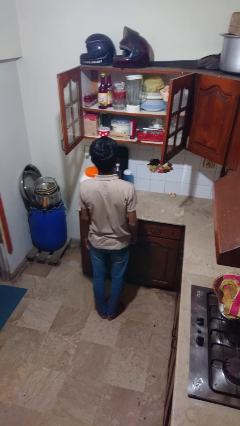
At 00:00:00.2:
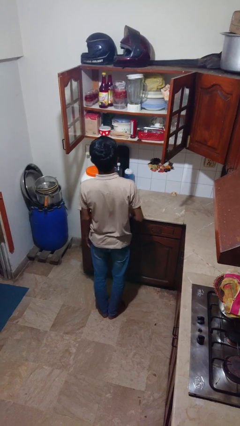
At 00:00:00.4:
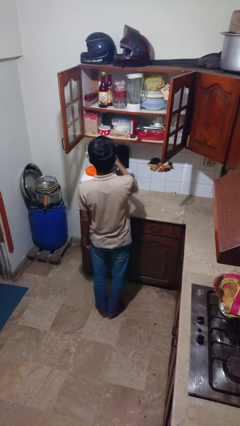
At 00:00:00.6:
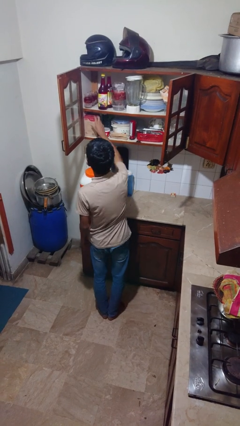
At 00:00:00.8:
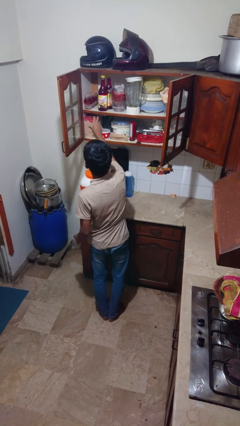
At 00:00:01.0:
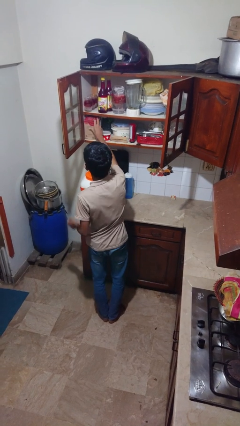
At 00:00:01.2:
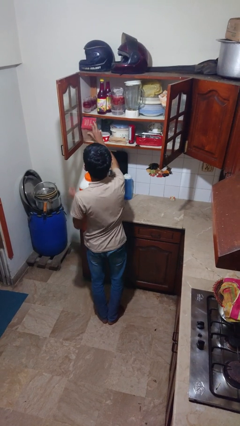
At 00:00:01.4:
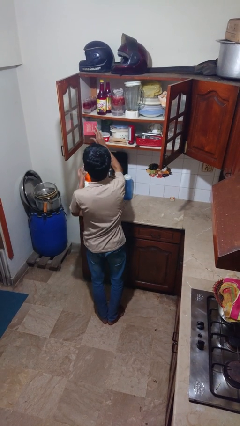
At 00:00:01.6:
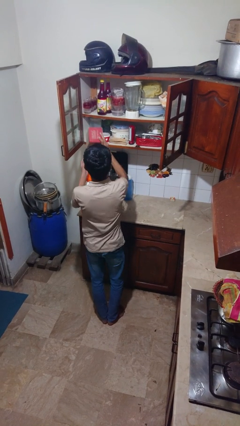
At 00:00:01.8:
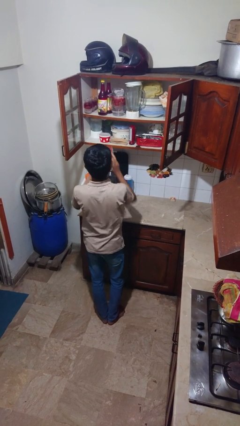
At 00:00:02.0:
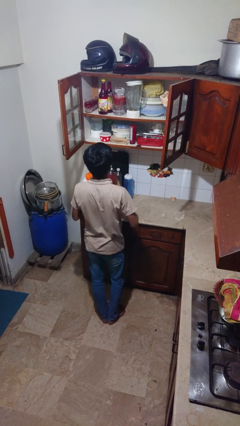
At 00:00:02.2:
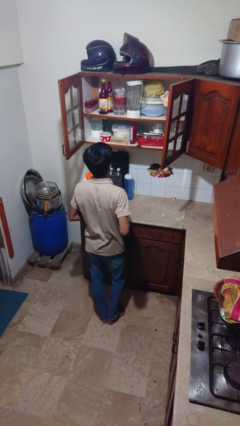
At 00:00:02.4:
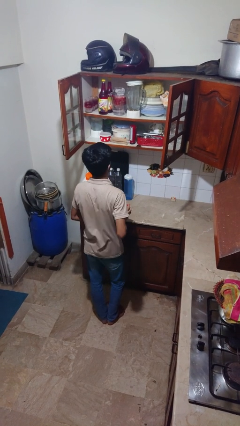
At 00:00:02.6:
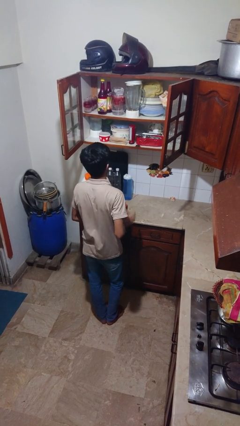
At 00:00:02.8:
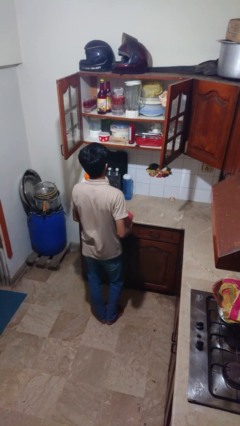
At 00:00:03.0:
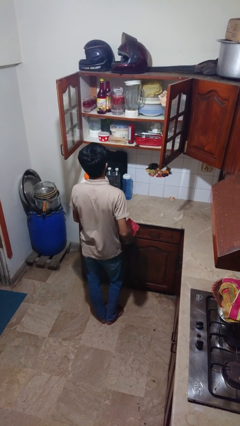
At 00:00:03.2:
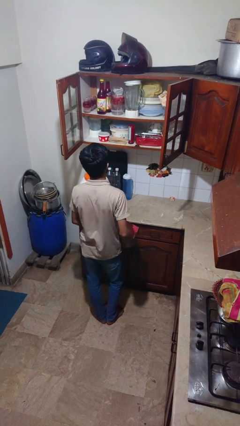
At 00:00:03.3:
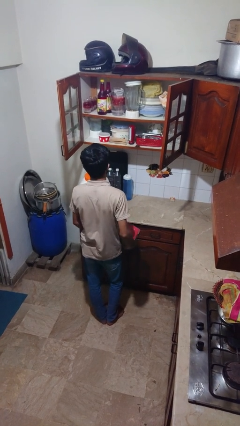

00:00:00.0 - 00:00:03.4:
person picks up object from cabinet

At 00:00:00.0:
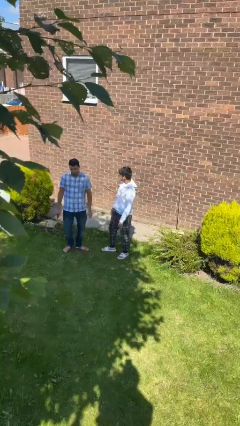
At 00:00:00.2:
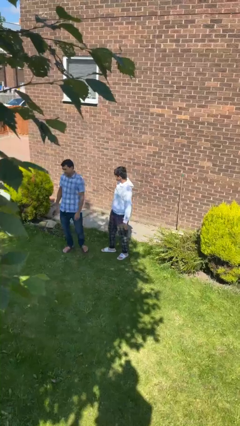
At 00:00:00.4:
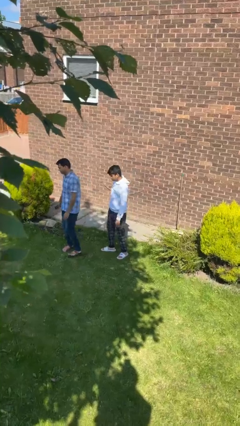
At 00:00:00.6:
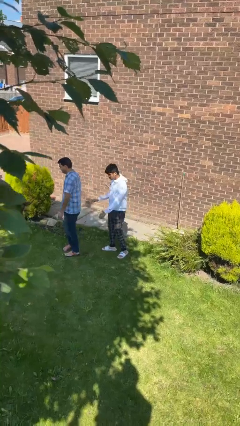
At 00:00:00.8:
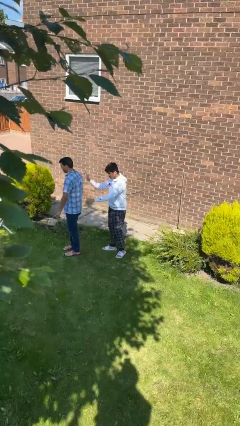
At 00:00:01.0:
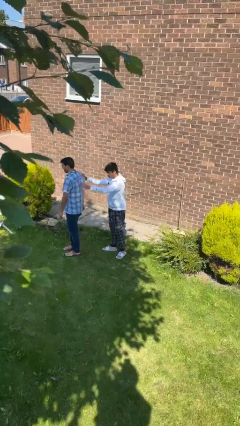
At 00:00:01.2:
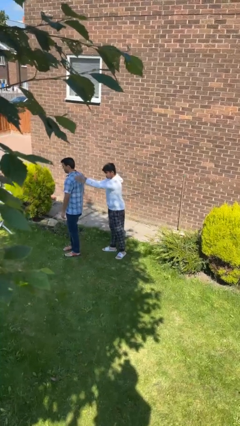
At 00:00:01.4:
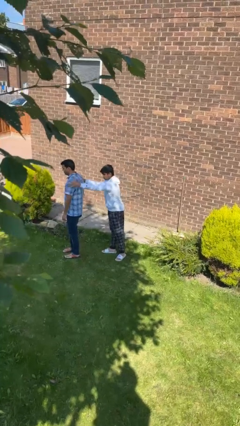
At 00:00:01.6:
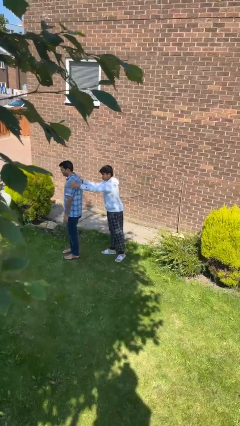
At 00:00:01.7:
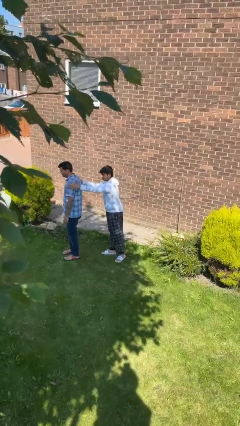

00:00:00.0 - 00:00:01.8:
person grabs person by shoulder

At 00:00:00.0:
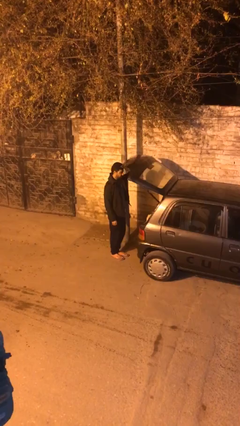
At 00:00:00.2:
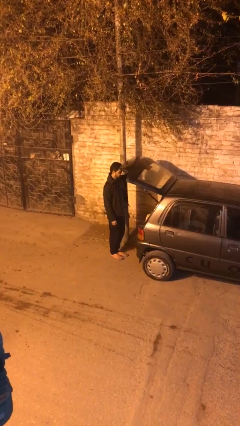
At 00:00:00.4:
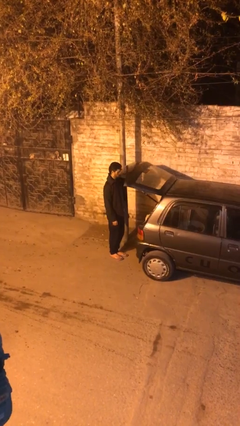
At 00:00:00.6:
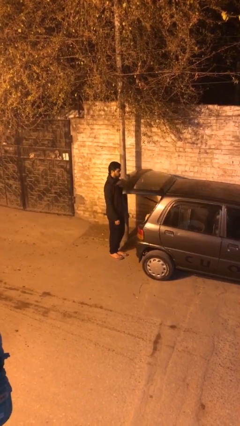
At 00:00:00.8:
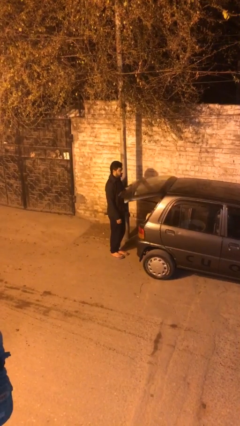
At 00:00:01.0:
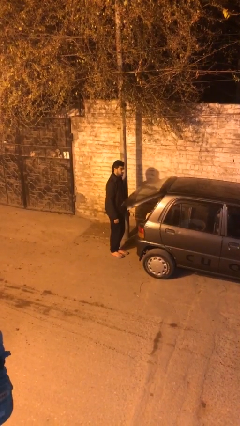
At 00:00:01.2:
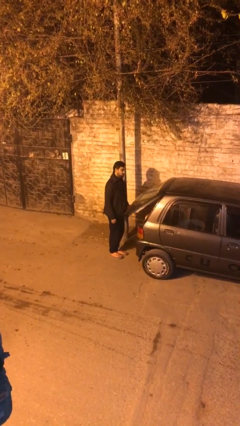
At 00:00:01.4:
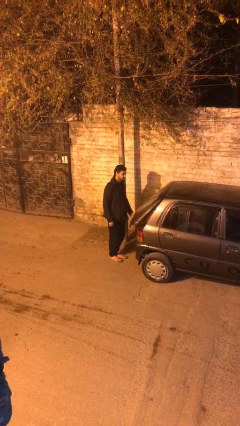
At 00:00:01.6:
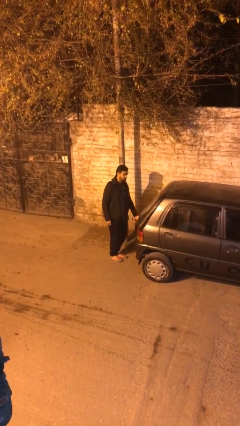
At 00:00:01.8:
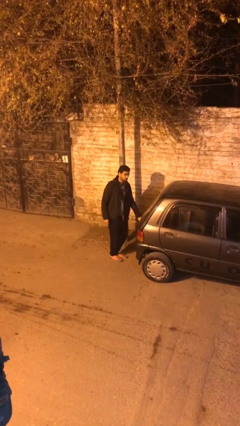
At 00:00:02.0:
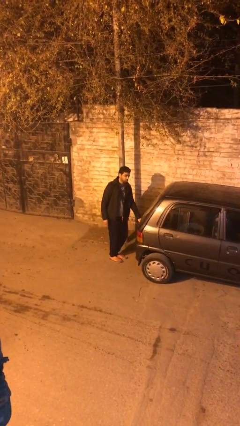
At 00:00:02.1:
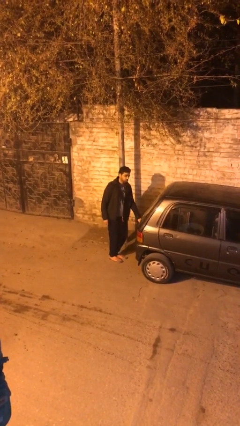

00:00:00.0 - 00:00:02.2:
person closes car trunk

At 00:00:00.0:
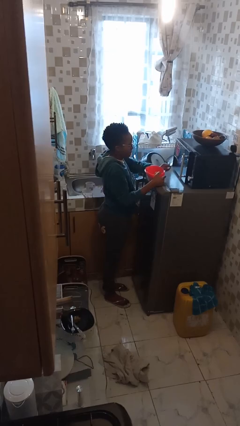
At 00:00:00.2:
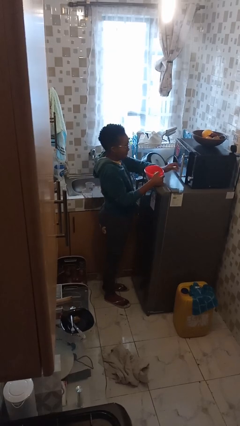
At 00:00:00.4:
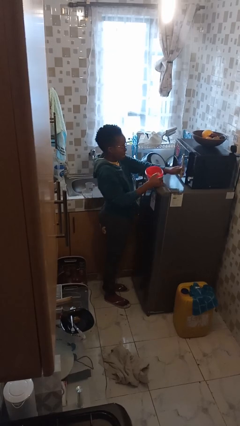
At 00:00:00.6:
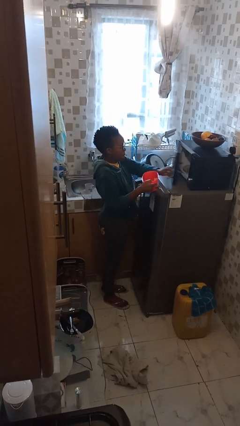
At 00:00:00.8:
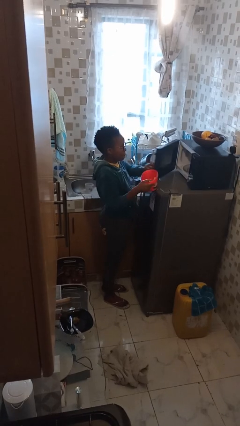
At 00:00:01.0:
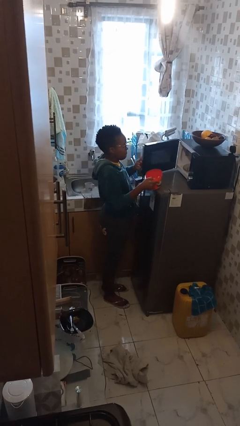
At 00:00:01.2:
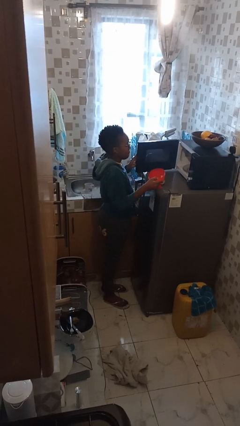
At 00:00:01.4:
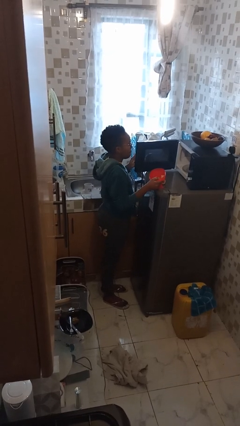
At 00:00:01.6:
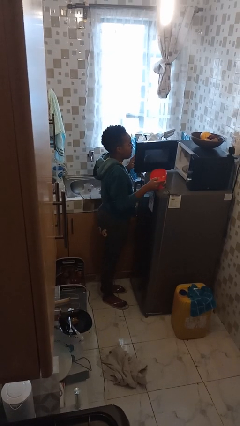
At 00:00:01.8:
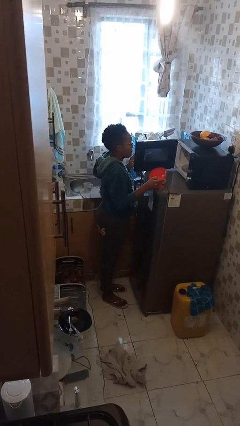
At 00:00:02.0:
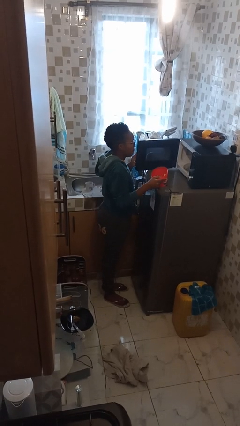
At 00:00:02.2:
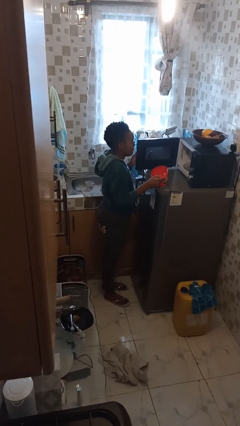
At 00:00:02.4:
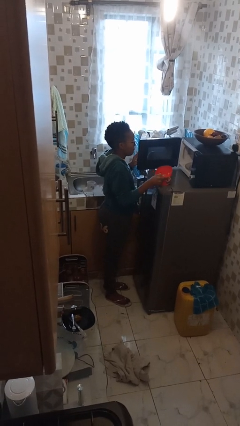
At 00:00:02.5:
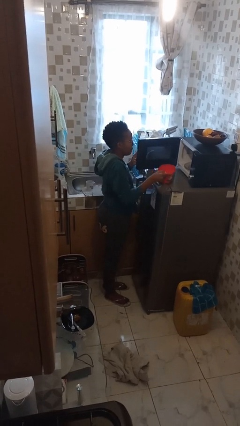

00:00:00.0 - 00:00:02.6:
person opens microwave

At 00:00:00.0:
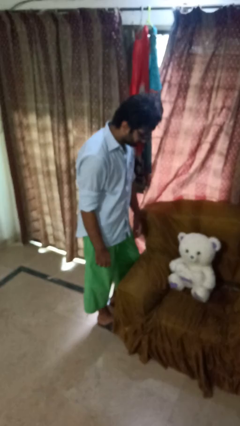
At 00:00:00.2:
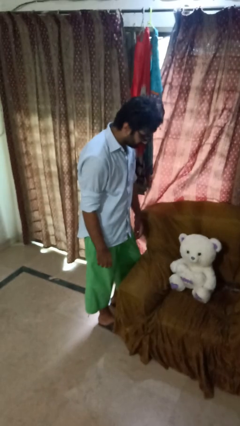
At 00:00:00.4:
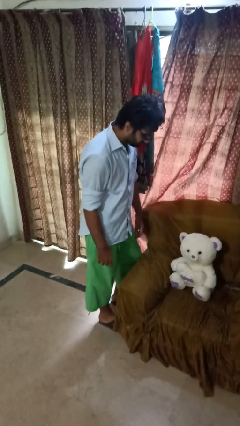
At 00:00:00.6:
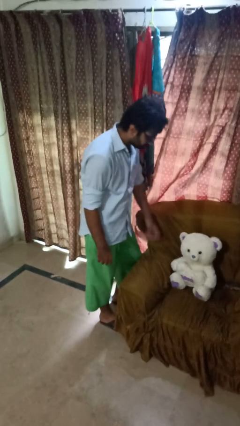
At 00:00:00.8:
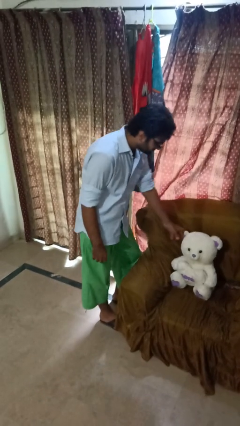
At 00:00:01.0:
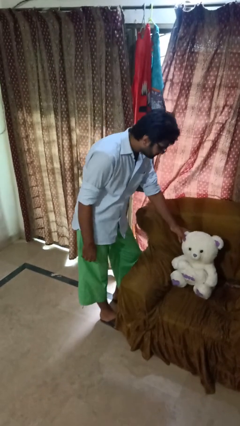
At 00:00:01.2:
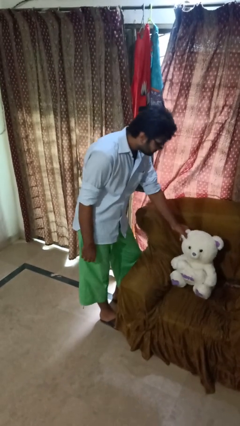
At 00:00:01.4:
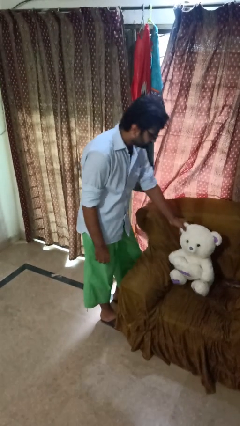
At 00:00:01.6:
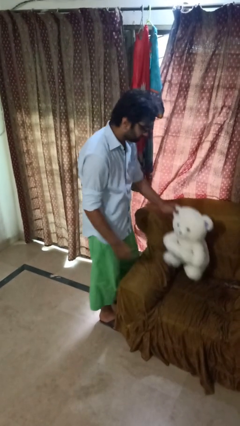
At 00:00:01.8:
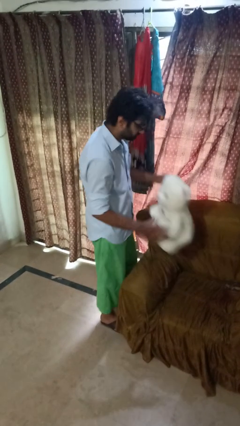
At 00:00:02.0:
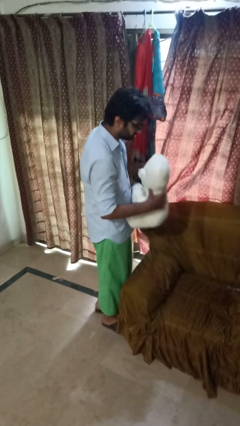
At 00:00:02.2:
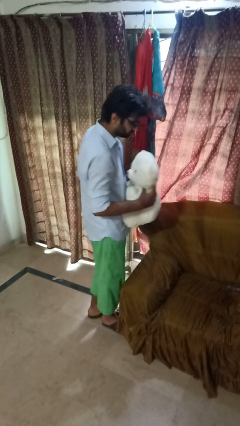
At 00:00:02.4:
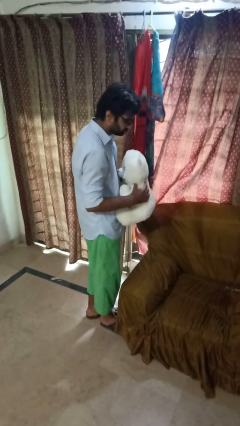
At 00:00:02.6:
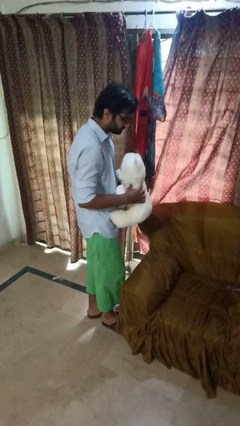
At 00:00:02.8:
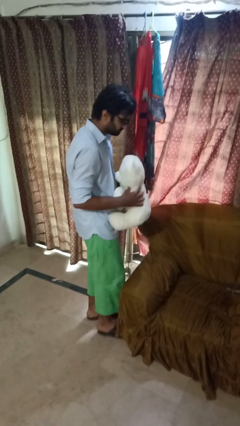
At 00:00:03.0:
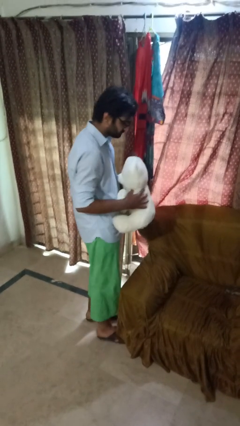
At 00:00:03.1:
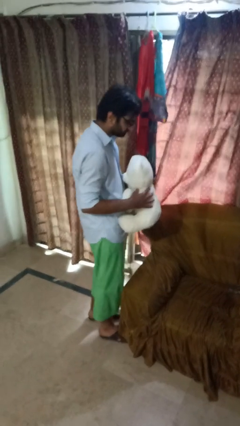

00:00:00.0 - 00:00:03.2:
person picks up object from couch

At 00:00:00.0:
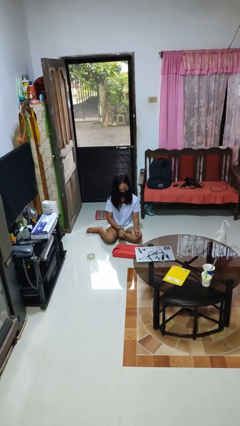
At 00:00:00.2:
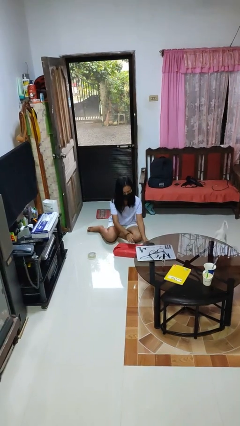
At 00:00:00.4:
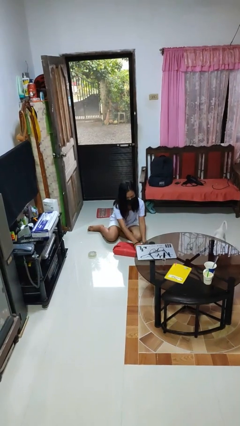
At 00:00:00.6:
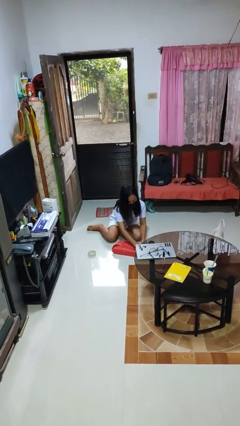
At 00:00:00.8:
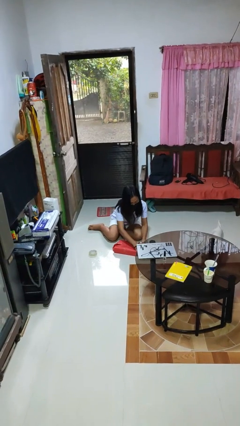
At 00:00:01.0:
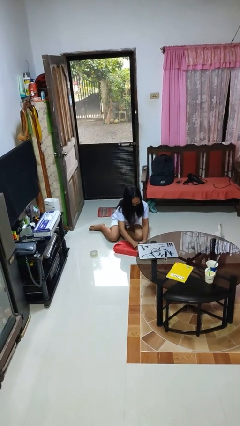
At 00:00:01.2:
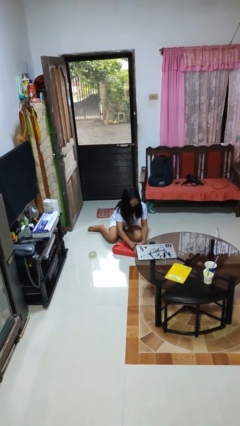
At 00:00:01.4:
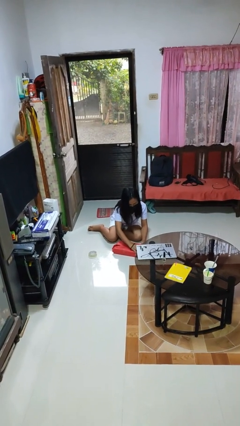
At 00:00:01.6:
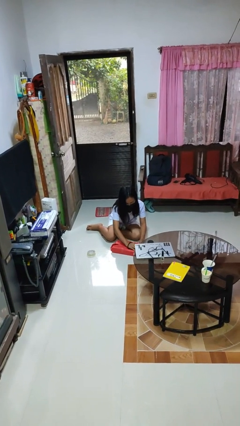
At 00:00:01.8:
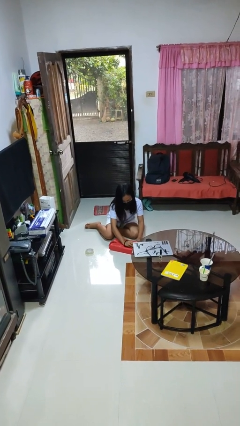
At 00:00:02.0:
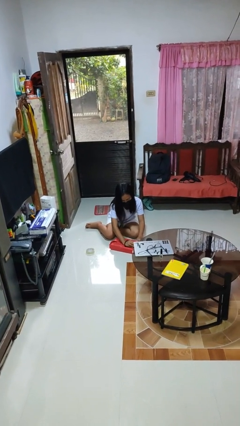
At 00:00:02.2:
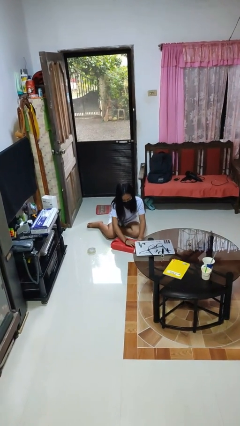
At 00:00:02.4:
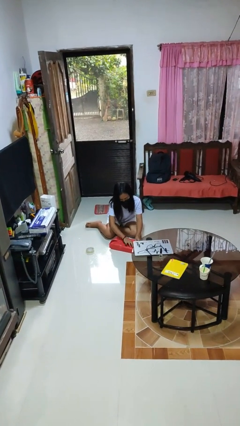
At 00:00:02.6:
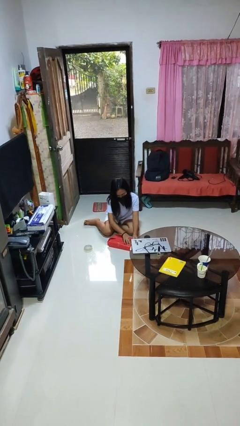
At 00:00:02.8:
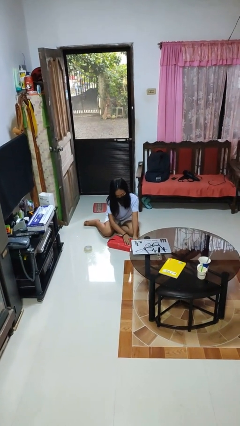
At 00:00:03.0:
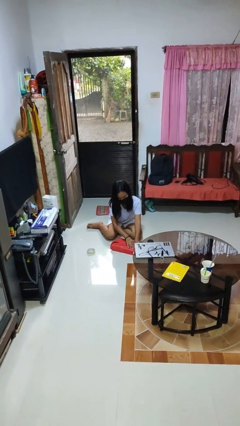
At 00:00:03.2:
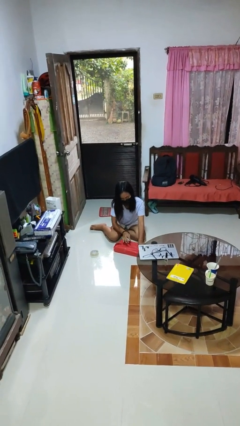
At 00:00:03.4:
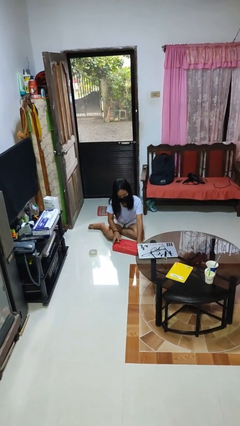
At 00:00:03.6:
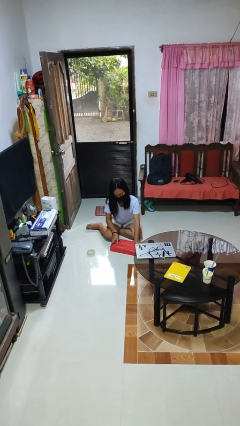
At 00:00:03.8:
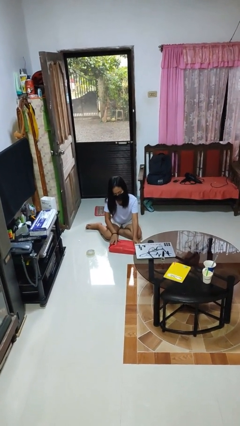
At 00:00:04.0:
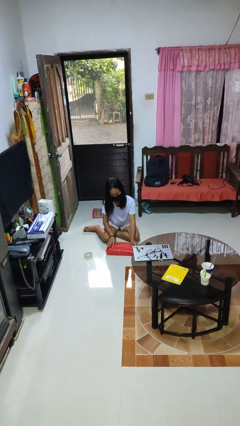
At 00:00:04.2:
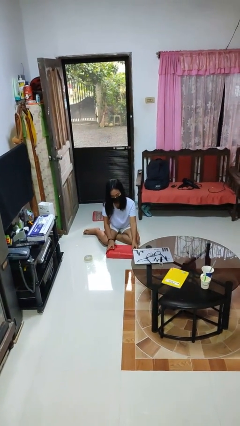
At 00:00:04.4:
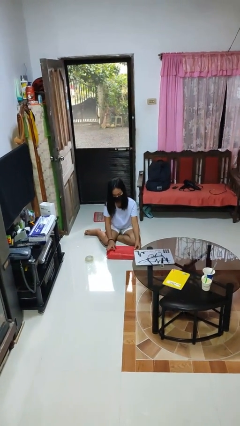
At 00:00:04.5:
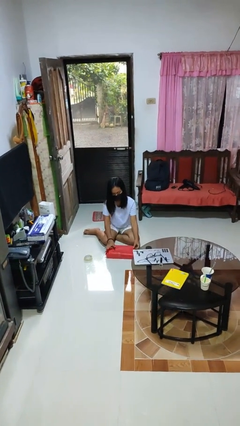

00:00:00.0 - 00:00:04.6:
person wraps box
